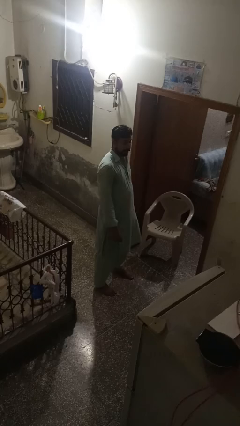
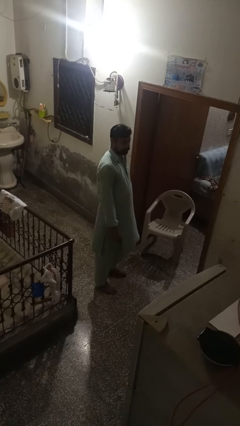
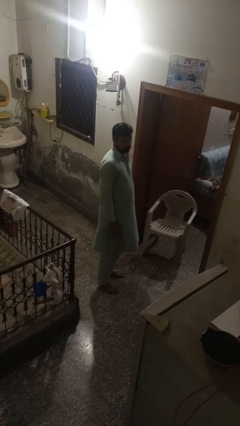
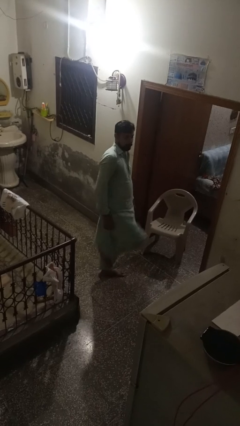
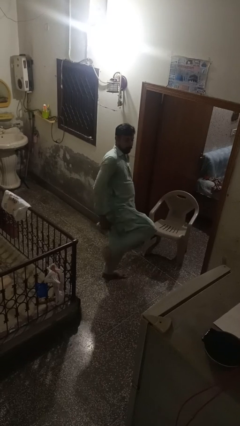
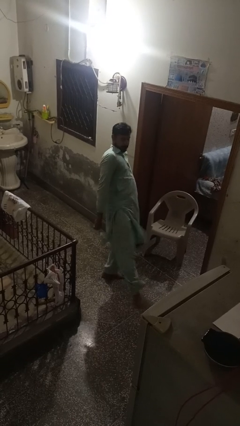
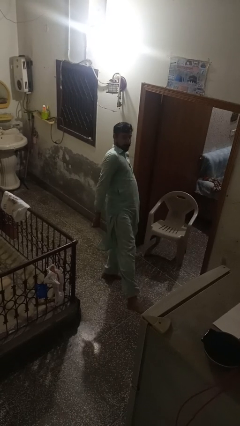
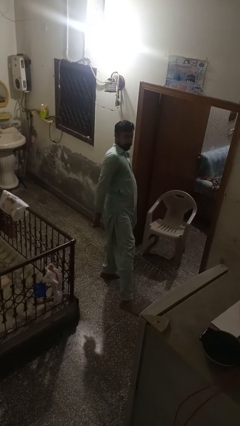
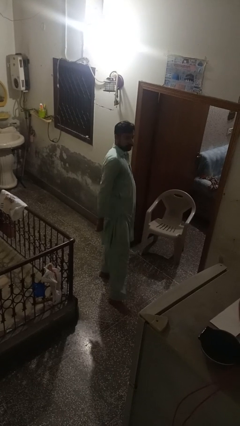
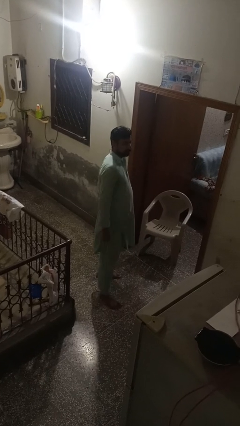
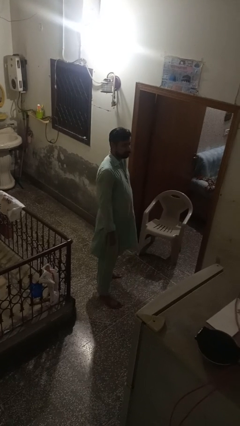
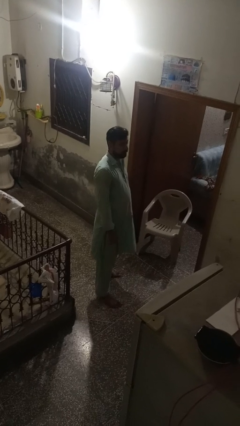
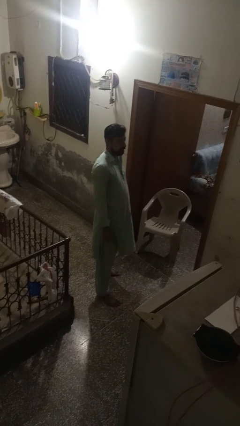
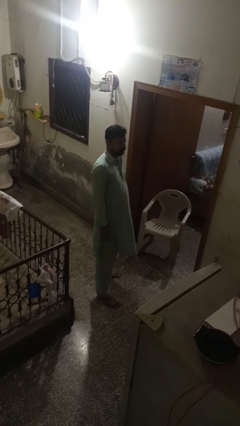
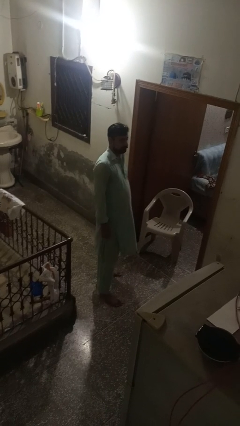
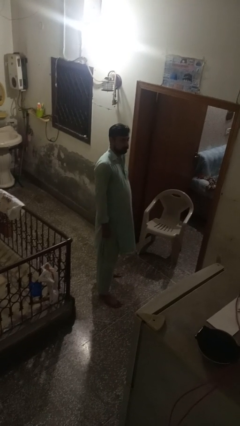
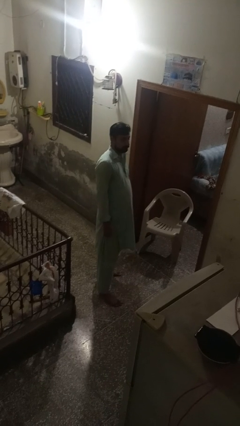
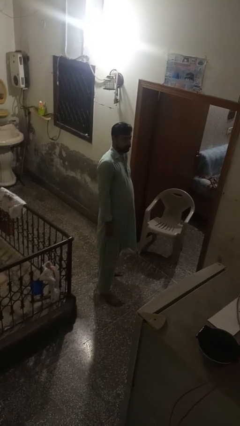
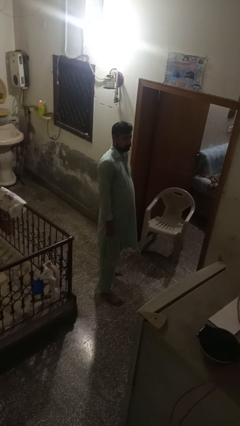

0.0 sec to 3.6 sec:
person karate kicks

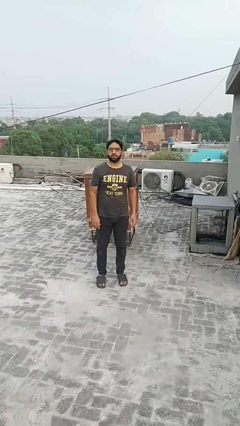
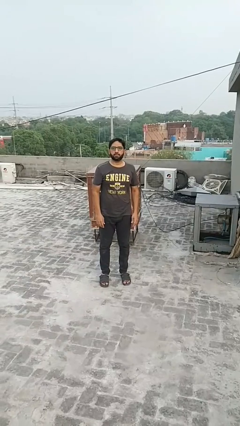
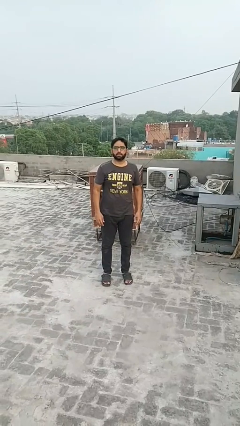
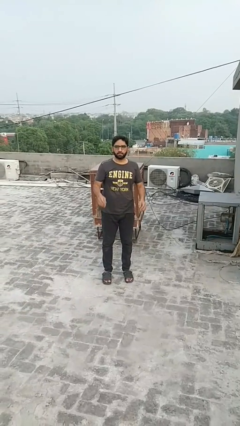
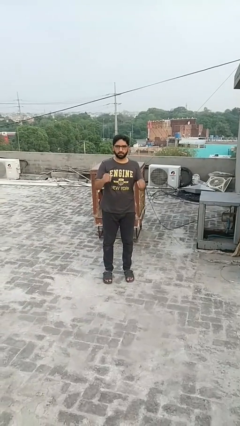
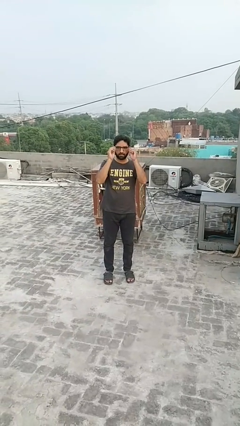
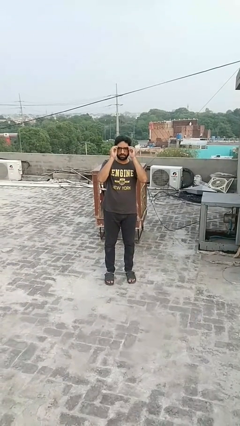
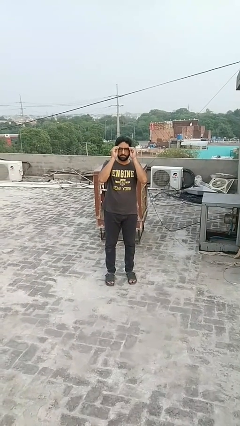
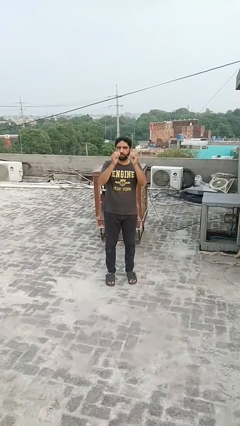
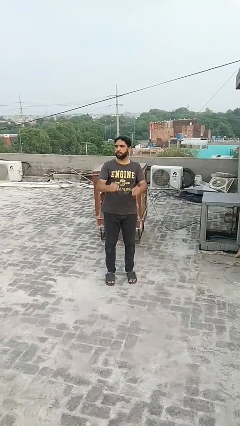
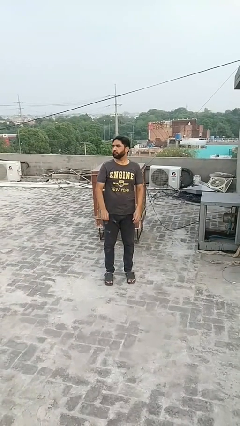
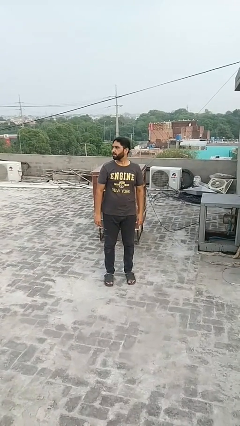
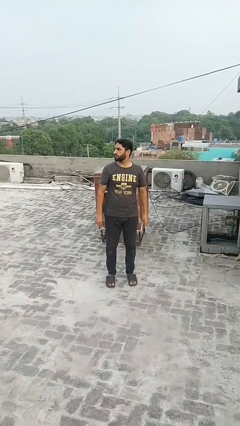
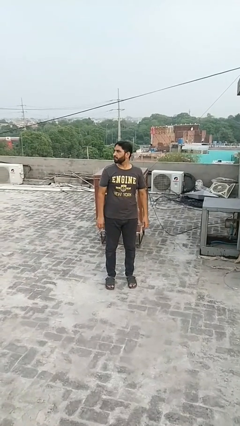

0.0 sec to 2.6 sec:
person takes off glasses

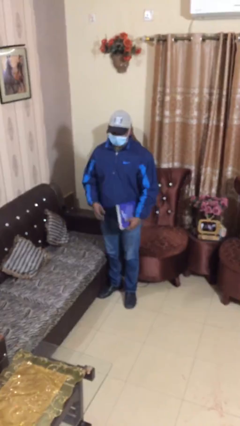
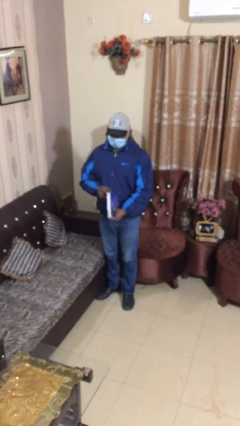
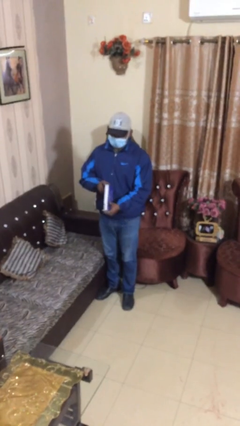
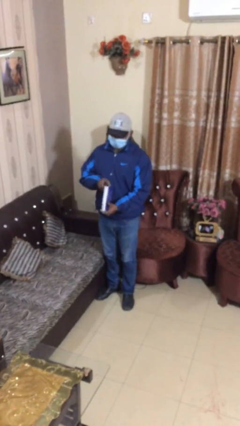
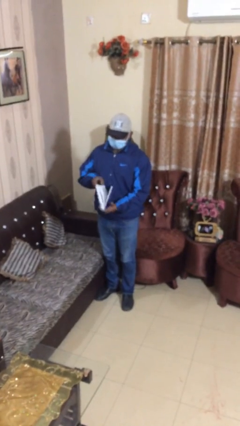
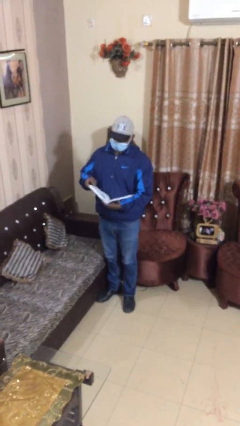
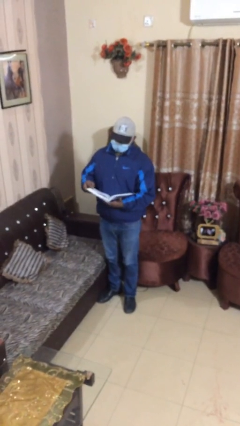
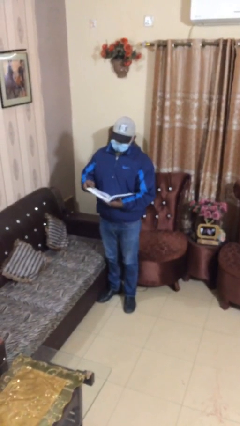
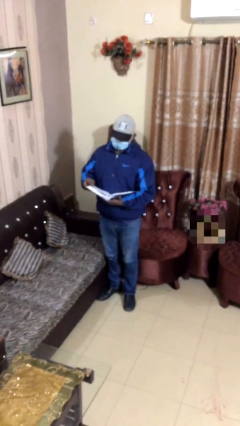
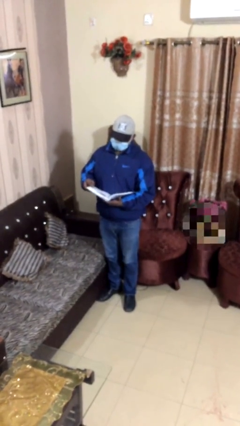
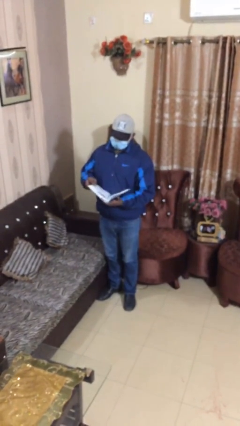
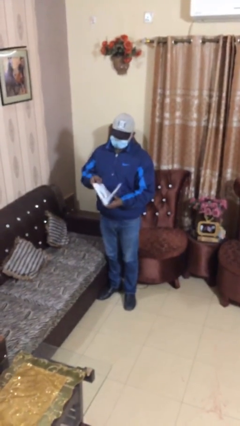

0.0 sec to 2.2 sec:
person reads document

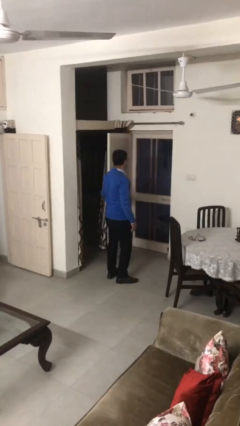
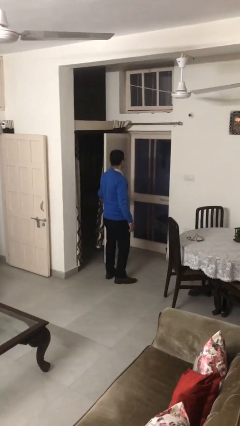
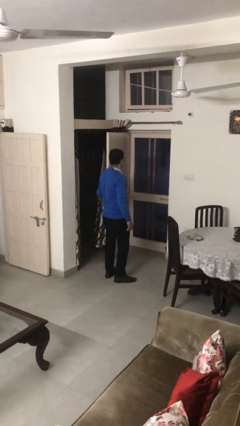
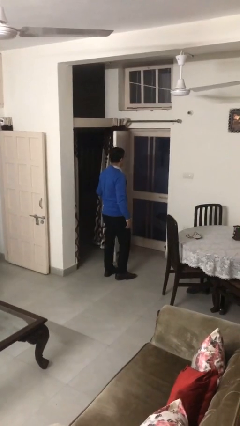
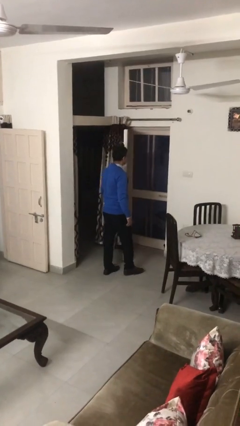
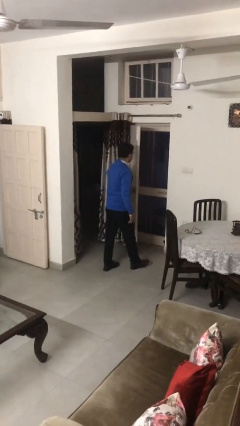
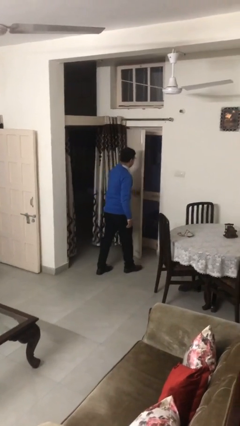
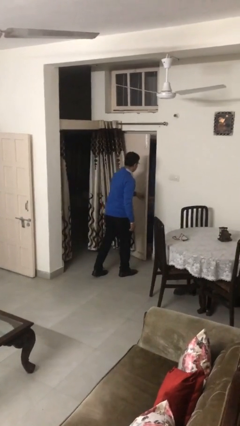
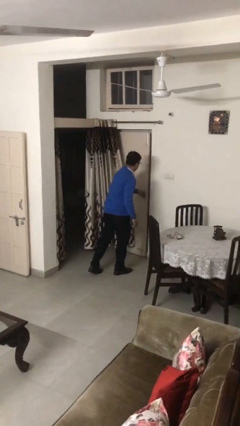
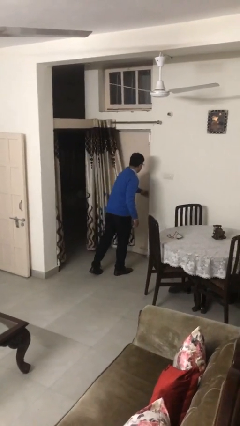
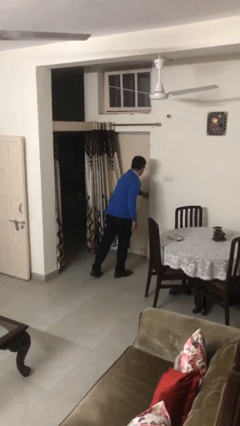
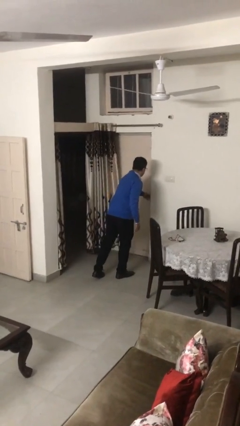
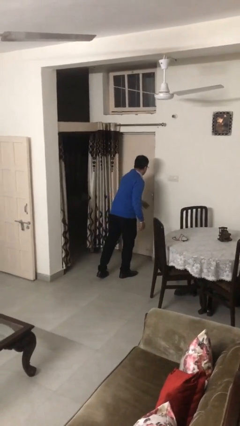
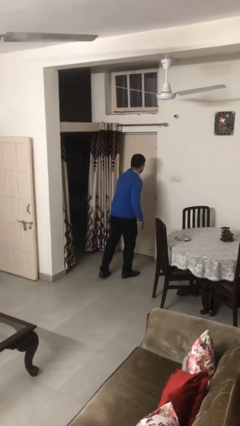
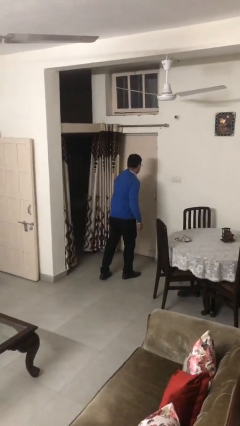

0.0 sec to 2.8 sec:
person closes facility door

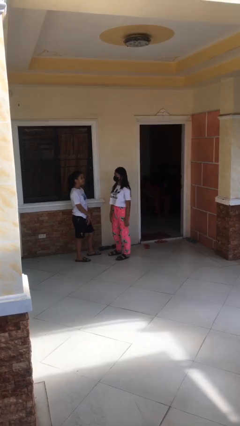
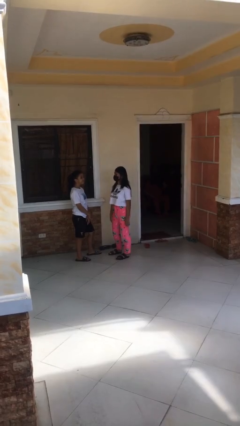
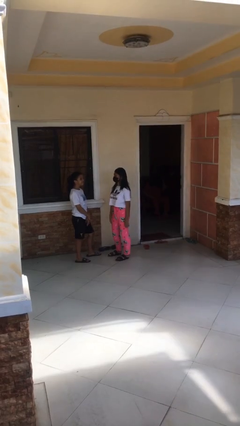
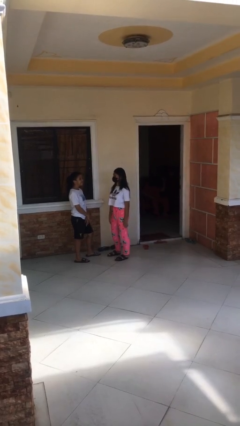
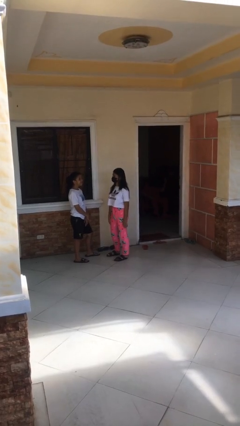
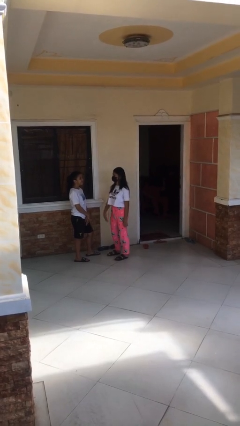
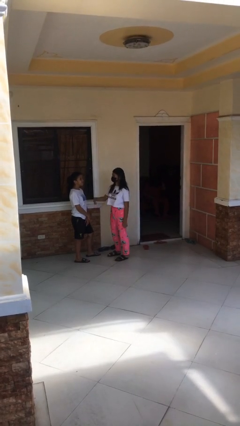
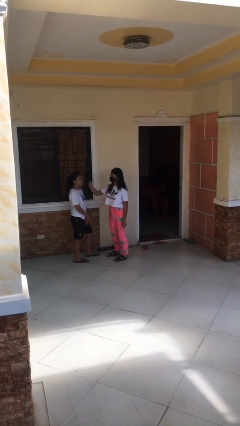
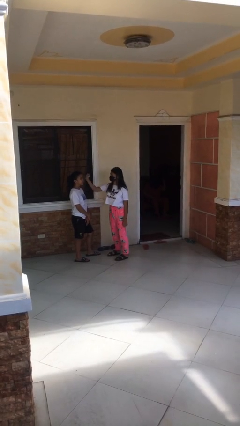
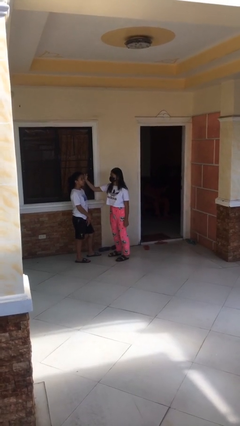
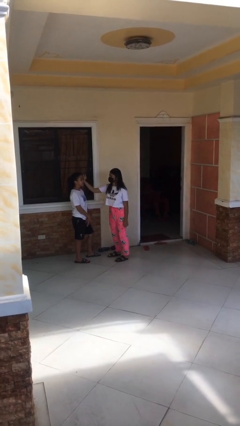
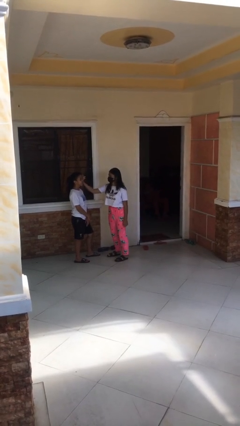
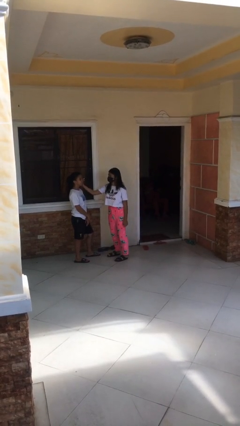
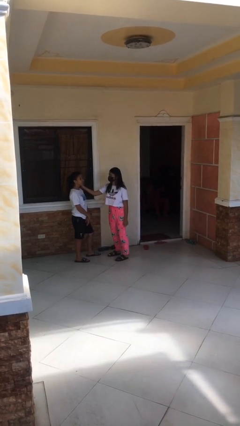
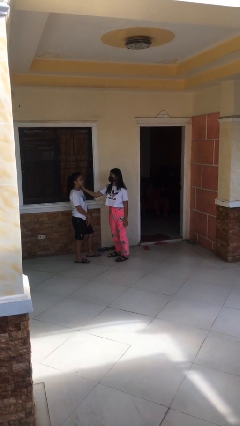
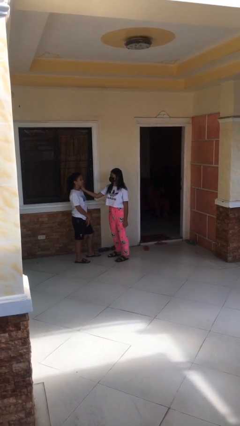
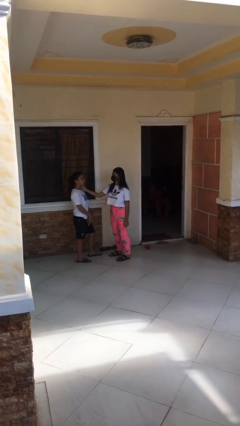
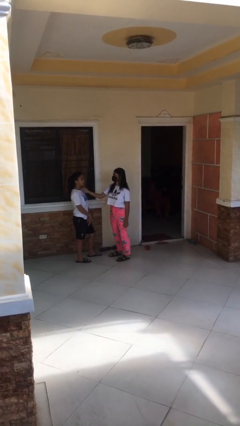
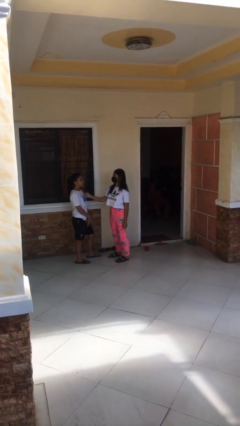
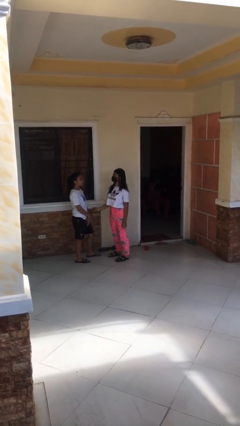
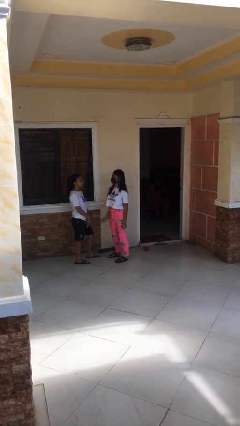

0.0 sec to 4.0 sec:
person touches face of person

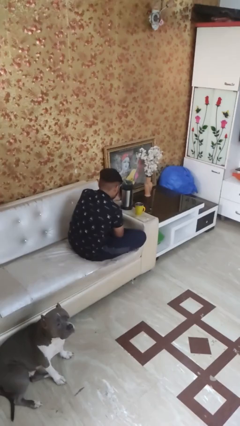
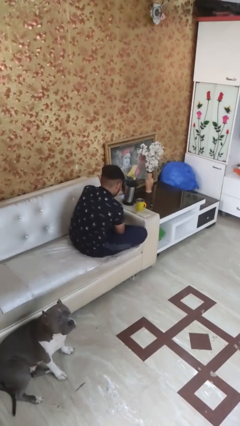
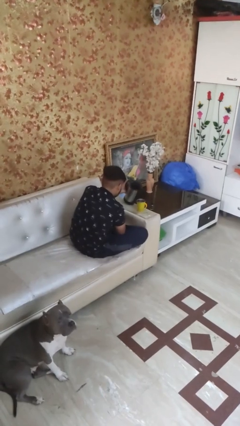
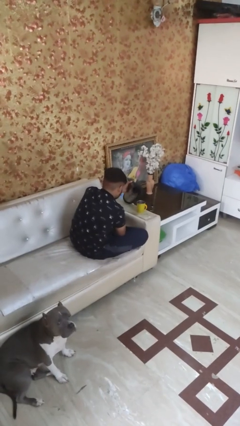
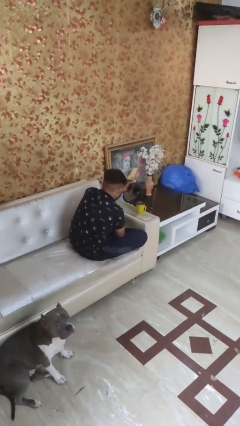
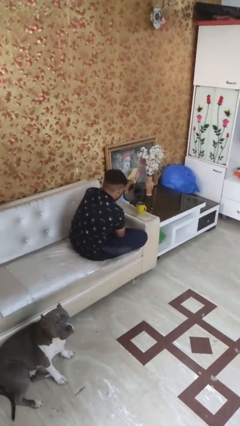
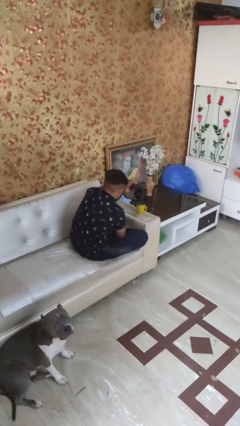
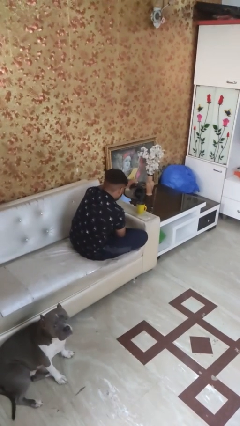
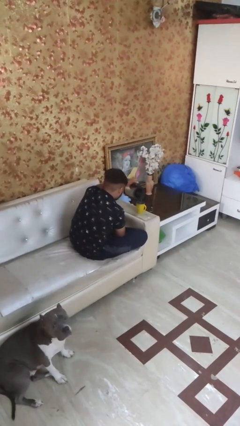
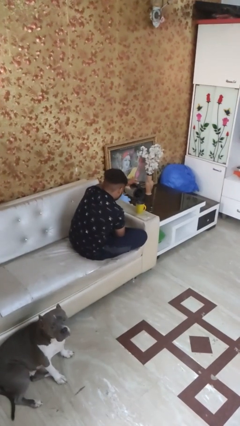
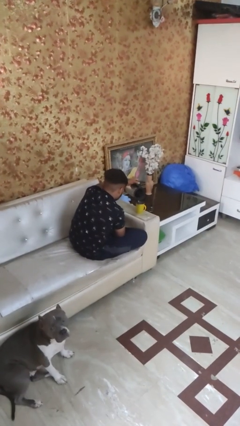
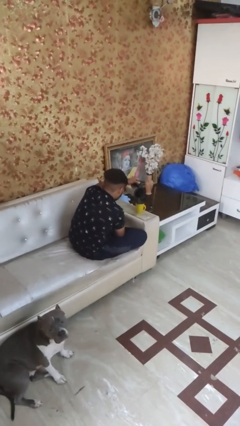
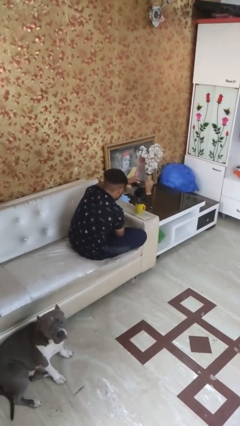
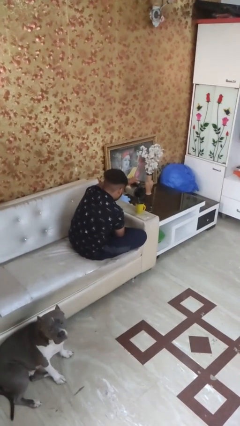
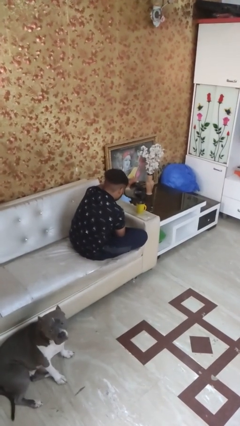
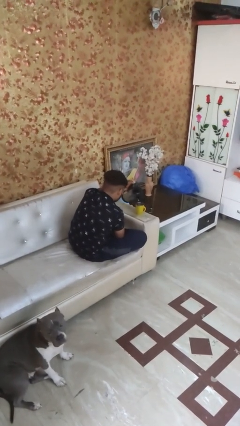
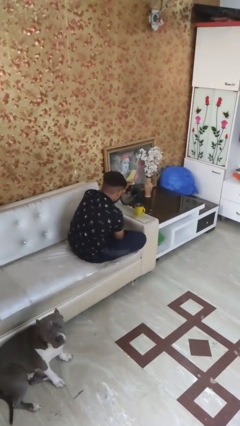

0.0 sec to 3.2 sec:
person pours coffee into mug
